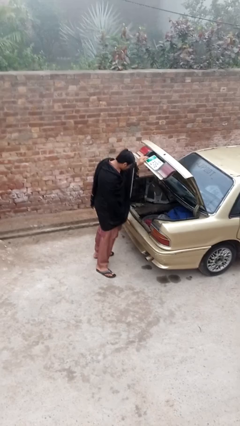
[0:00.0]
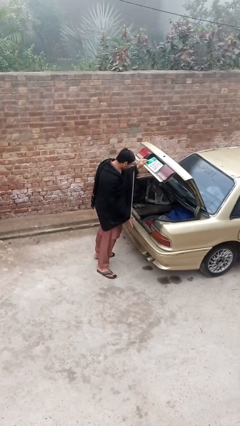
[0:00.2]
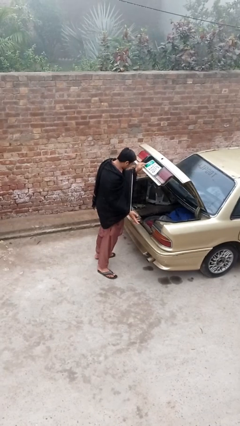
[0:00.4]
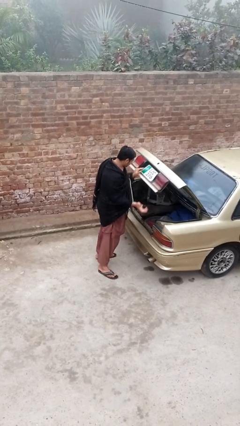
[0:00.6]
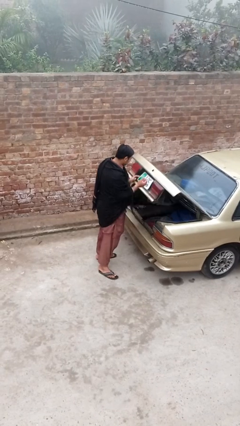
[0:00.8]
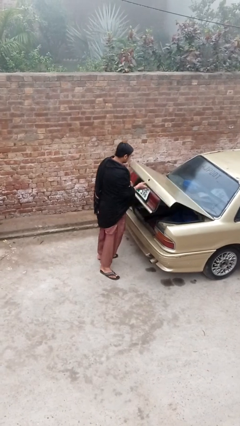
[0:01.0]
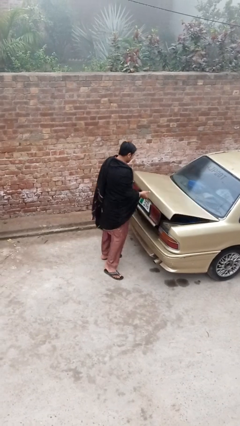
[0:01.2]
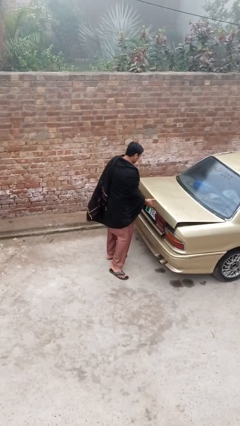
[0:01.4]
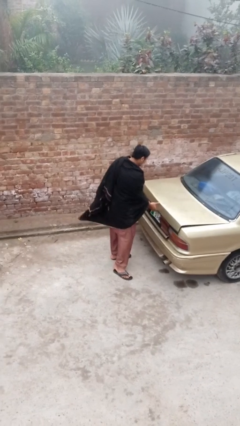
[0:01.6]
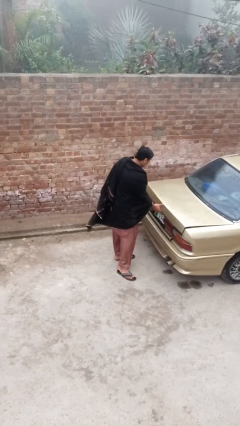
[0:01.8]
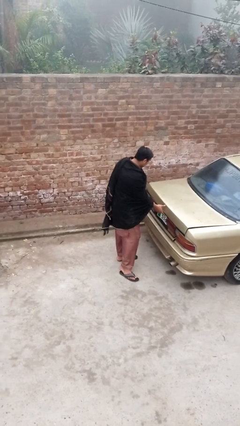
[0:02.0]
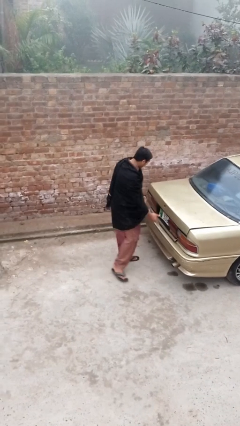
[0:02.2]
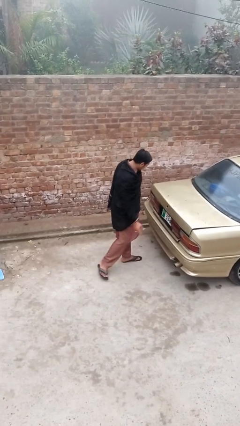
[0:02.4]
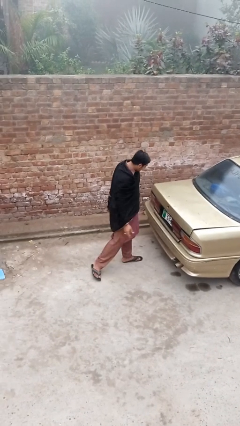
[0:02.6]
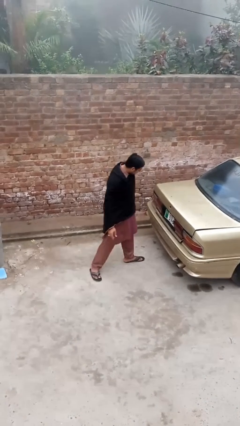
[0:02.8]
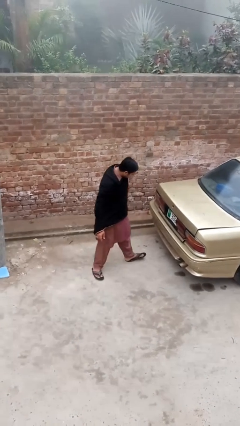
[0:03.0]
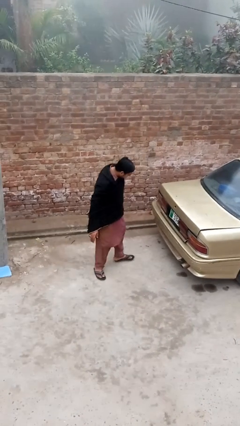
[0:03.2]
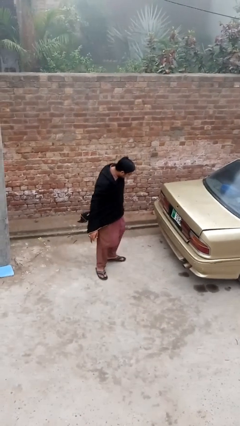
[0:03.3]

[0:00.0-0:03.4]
person closes car trunk

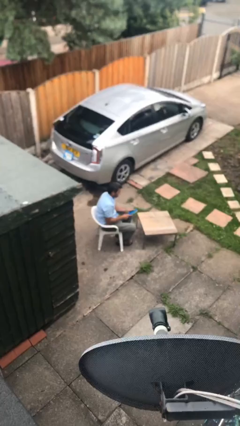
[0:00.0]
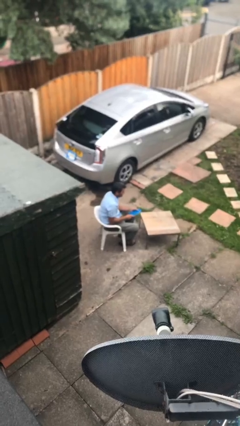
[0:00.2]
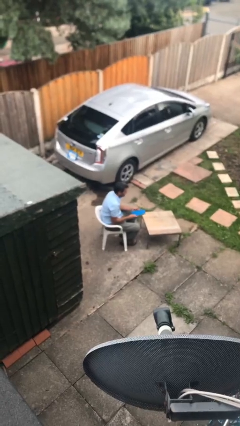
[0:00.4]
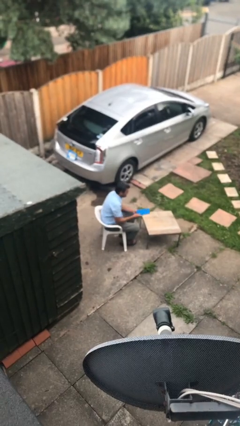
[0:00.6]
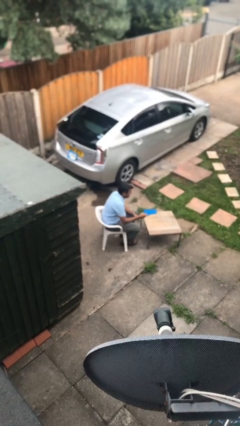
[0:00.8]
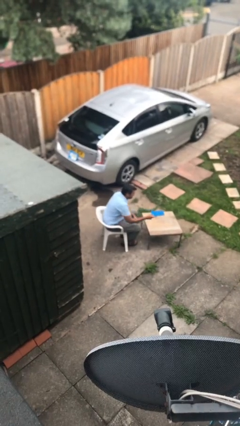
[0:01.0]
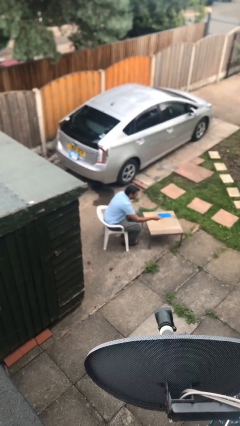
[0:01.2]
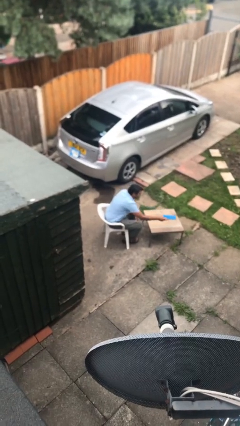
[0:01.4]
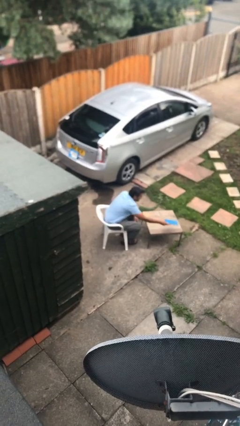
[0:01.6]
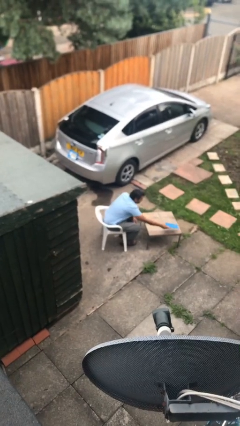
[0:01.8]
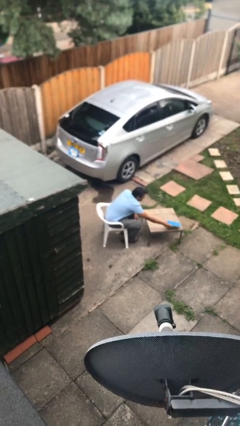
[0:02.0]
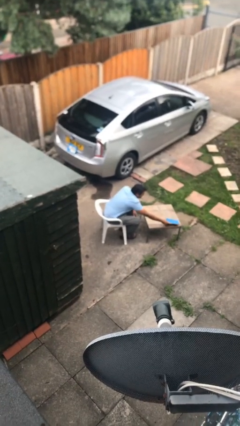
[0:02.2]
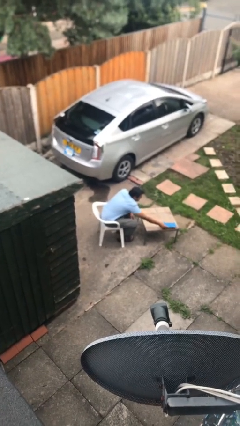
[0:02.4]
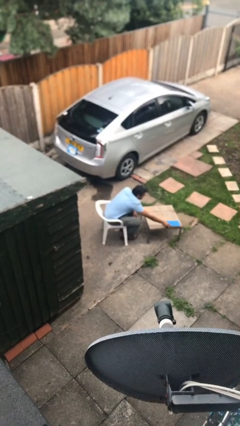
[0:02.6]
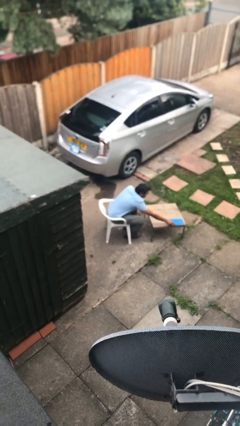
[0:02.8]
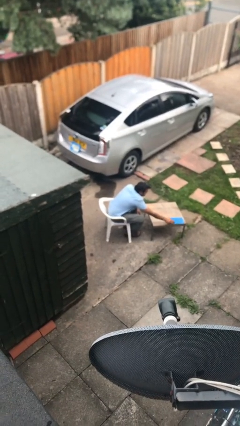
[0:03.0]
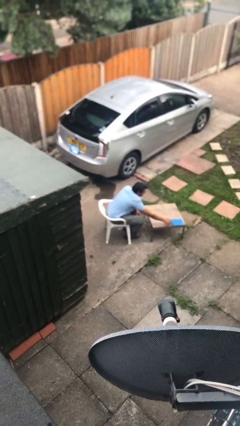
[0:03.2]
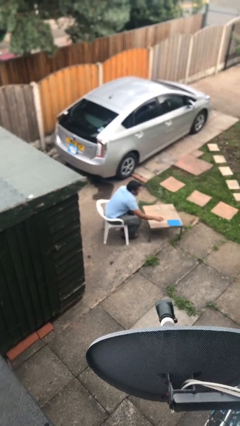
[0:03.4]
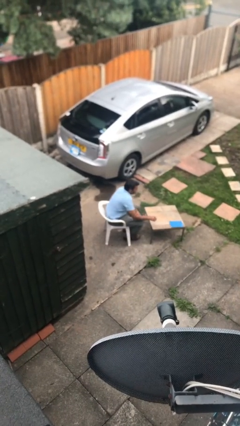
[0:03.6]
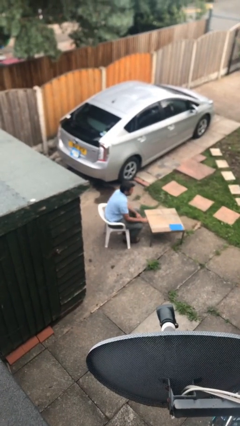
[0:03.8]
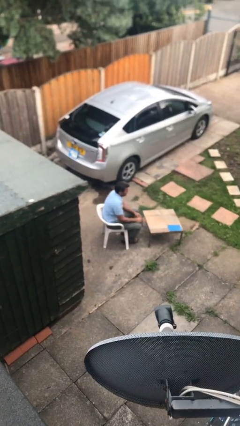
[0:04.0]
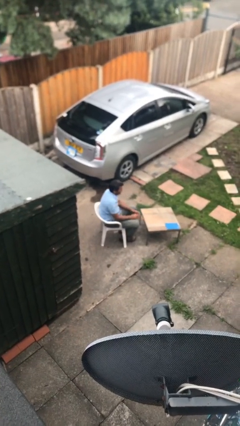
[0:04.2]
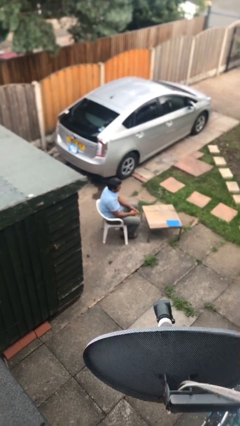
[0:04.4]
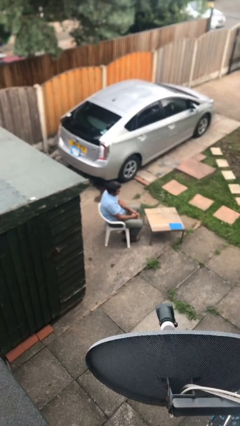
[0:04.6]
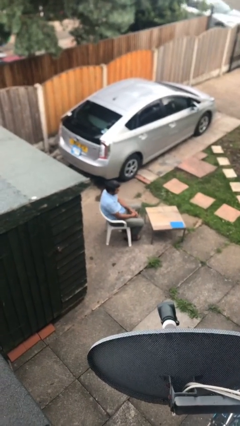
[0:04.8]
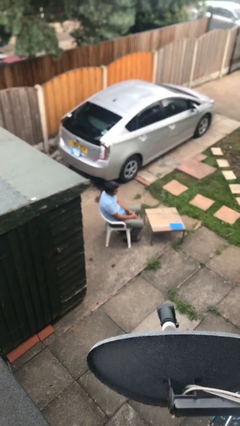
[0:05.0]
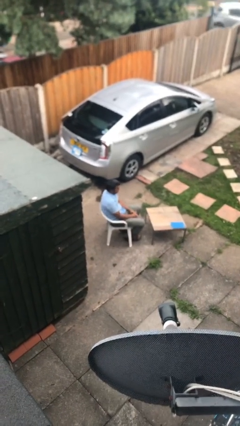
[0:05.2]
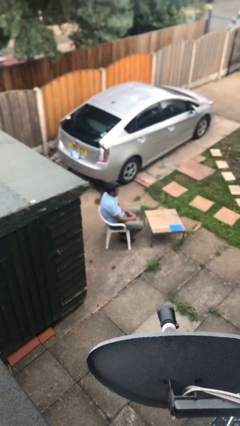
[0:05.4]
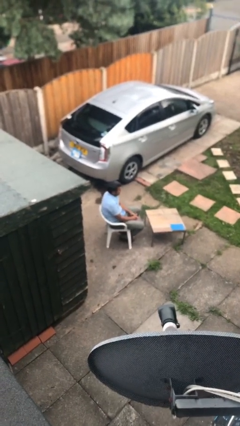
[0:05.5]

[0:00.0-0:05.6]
person puts down object on table

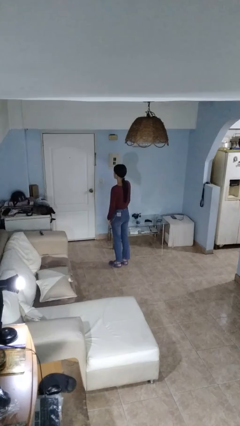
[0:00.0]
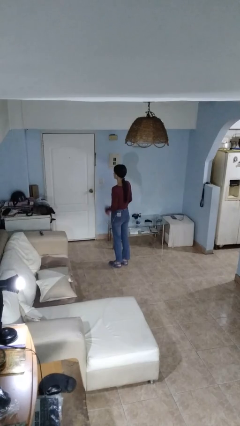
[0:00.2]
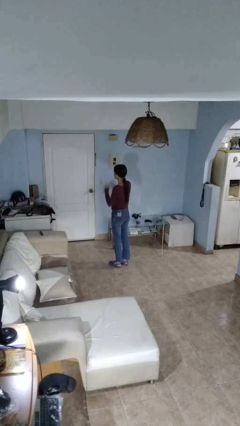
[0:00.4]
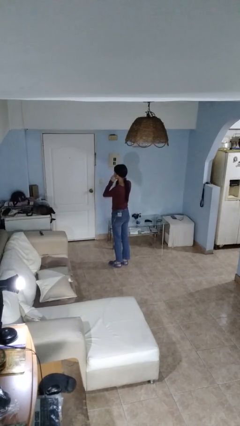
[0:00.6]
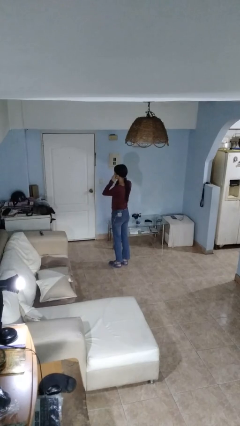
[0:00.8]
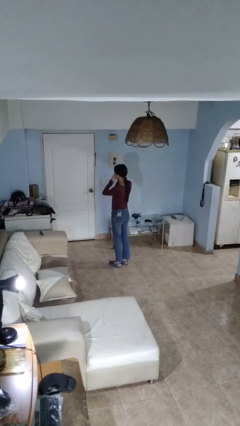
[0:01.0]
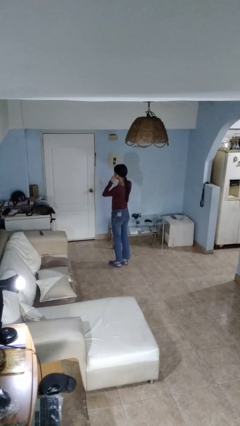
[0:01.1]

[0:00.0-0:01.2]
person takes off headphones

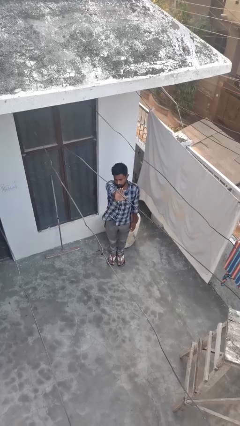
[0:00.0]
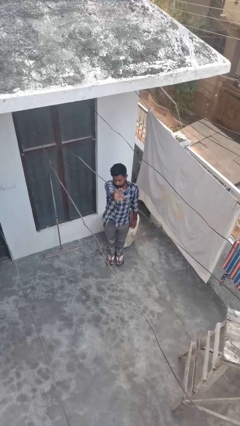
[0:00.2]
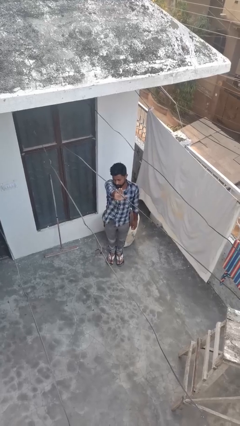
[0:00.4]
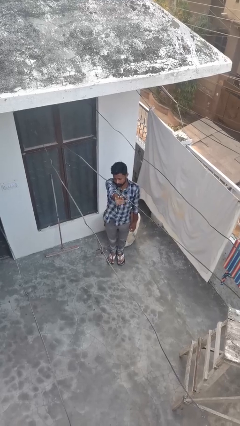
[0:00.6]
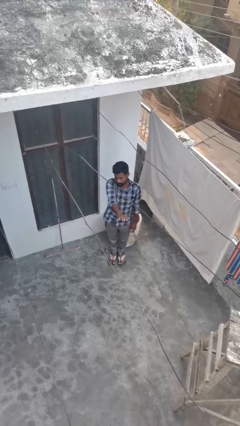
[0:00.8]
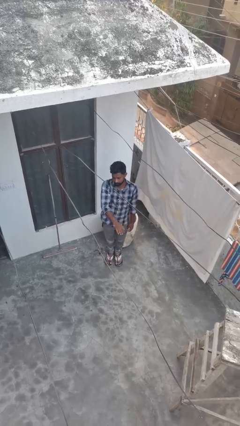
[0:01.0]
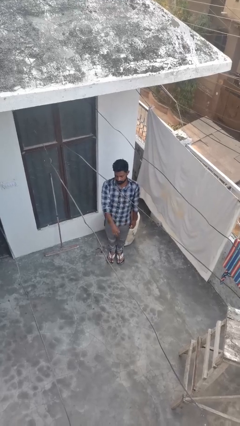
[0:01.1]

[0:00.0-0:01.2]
person gestures stop

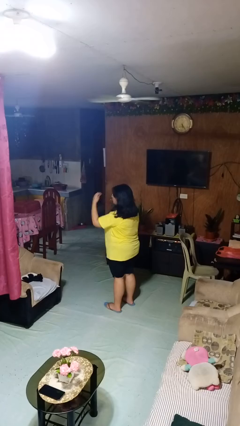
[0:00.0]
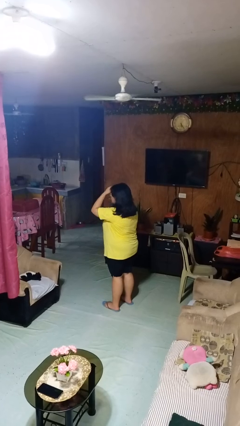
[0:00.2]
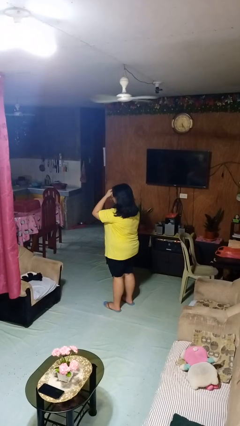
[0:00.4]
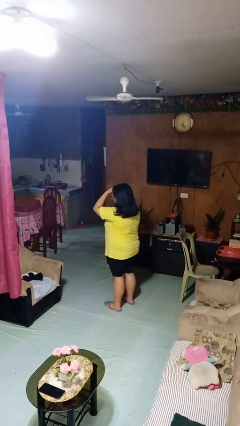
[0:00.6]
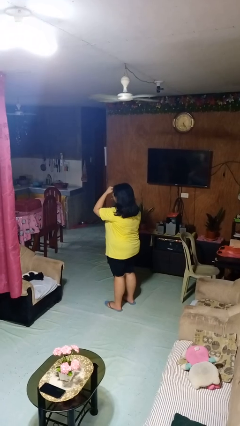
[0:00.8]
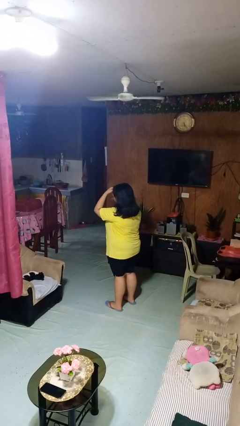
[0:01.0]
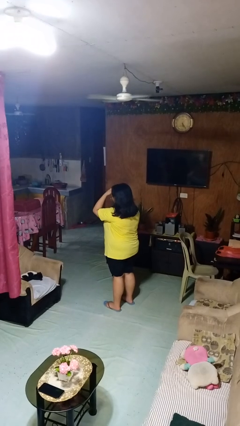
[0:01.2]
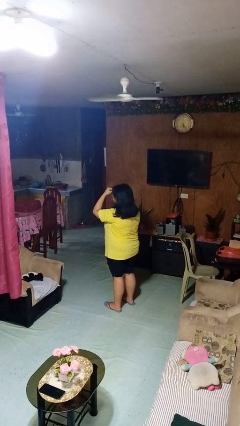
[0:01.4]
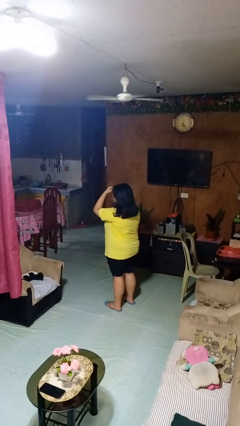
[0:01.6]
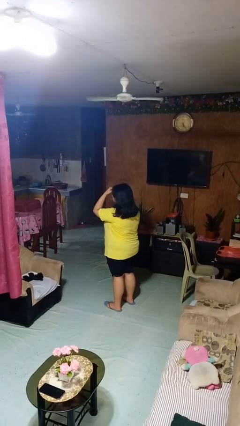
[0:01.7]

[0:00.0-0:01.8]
person scratches face

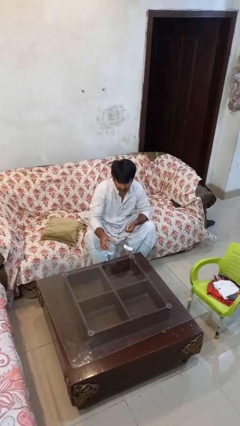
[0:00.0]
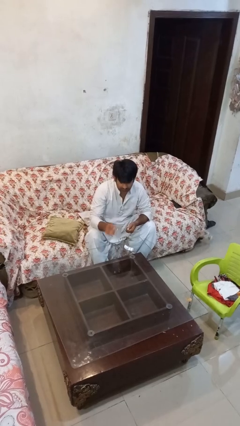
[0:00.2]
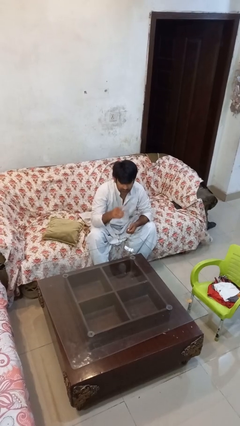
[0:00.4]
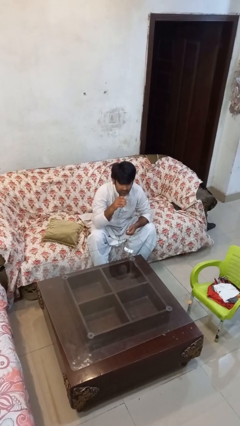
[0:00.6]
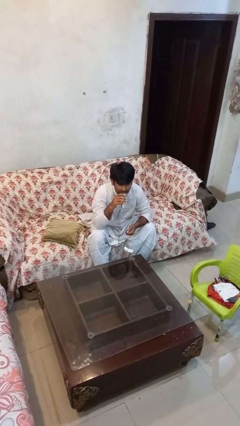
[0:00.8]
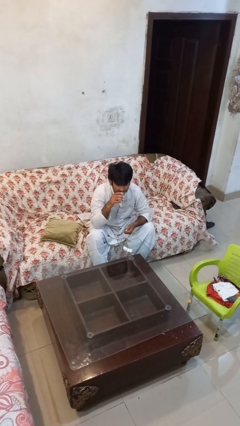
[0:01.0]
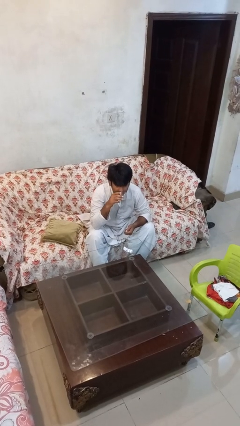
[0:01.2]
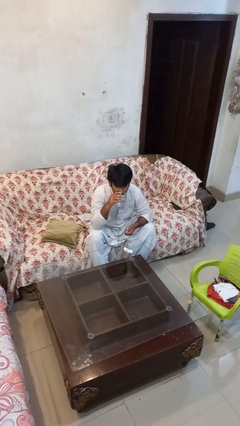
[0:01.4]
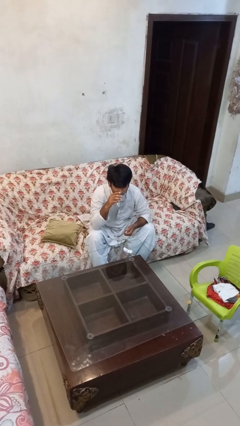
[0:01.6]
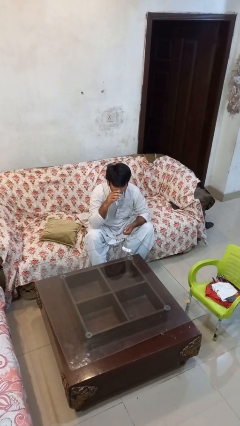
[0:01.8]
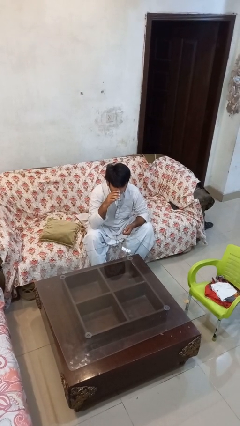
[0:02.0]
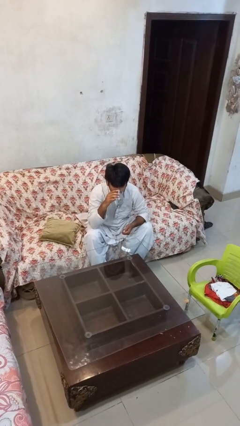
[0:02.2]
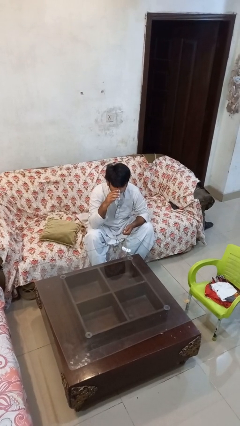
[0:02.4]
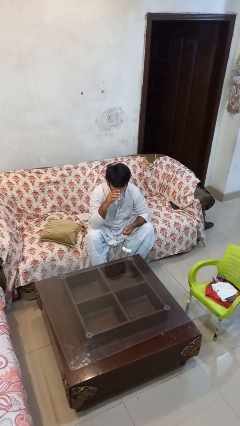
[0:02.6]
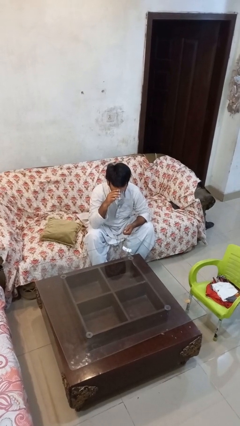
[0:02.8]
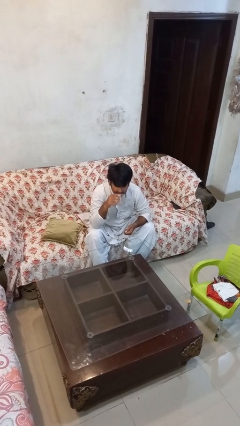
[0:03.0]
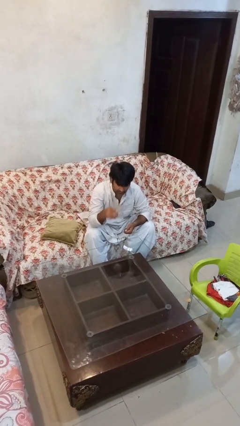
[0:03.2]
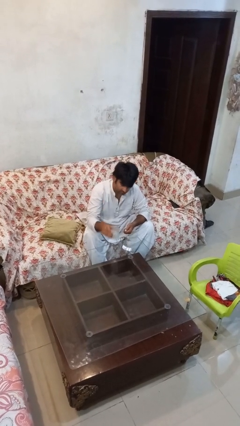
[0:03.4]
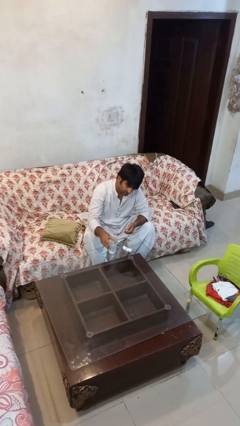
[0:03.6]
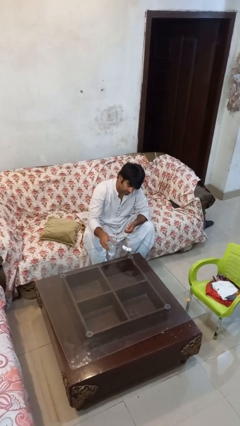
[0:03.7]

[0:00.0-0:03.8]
person drinks from cup

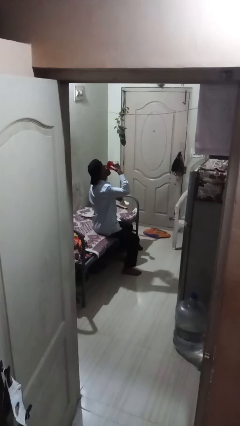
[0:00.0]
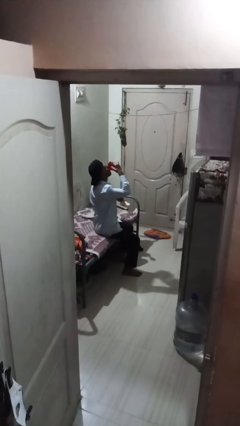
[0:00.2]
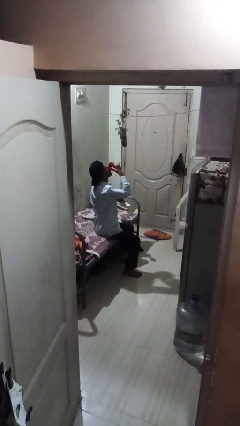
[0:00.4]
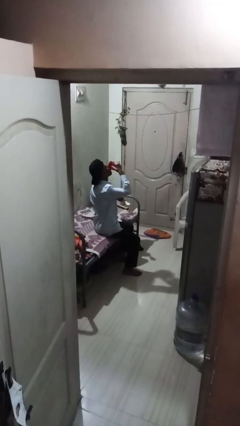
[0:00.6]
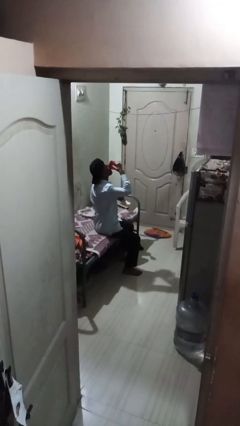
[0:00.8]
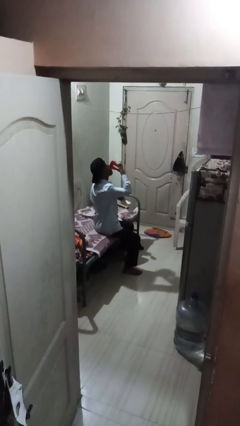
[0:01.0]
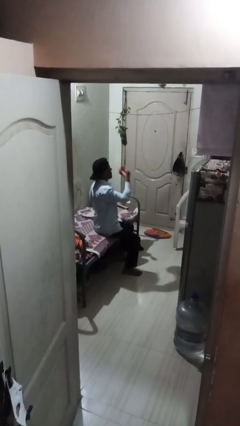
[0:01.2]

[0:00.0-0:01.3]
person drinks from mug
